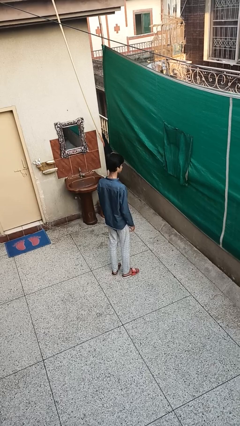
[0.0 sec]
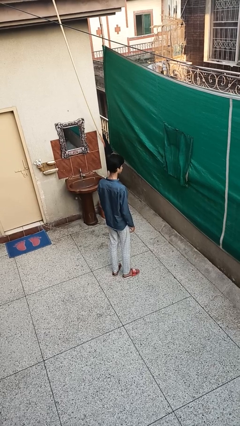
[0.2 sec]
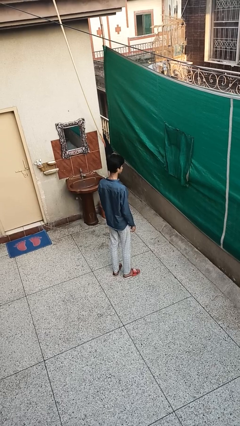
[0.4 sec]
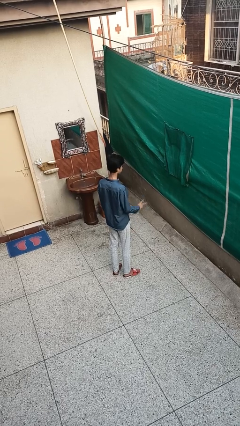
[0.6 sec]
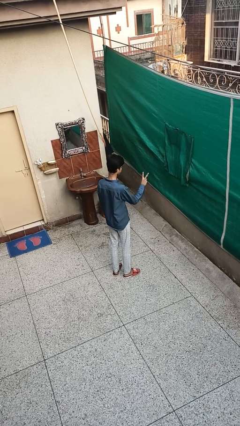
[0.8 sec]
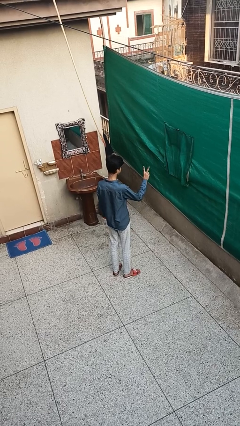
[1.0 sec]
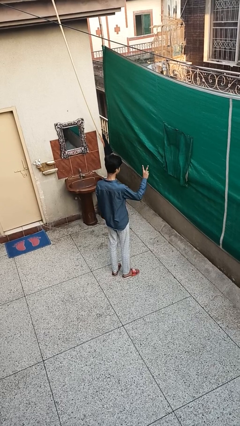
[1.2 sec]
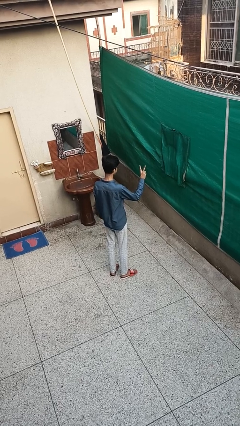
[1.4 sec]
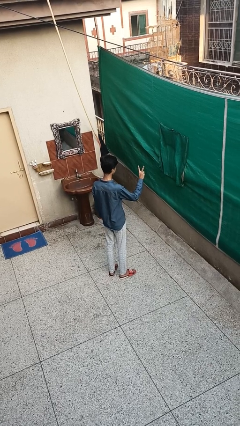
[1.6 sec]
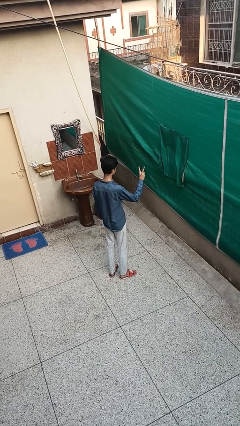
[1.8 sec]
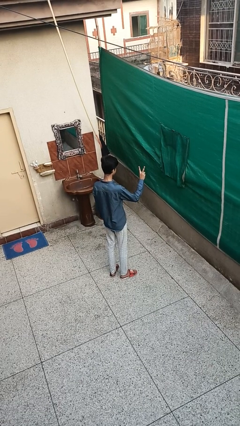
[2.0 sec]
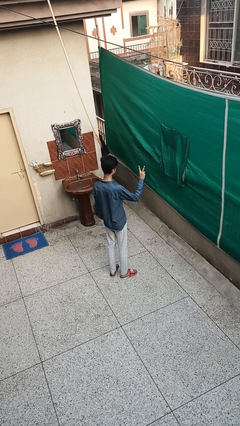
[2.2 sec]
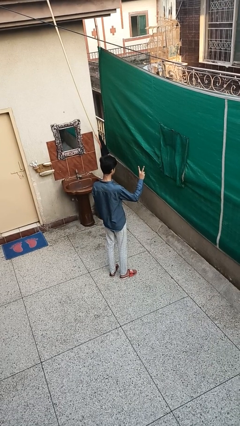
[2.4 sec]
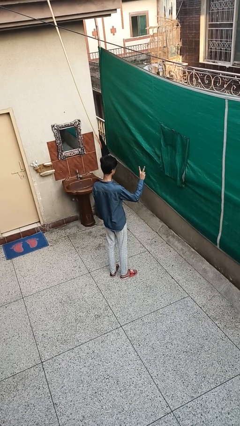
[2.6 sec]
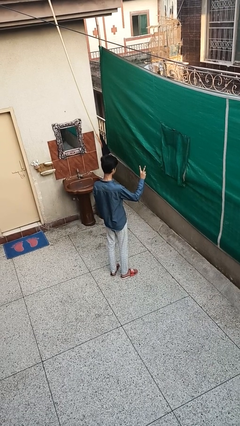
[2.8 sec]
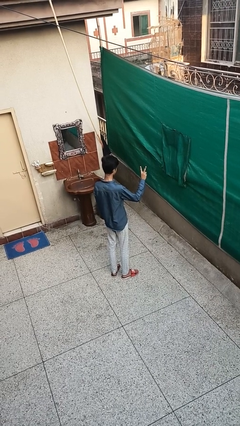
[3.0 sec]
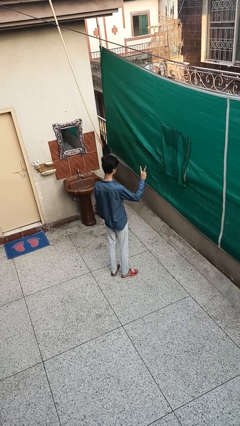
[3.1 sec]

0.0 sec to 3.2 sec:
person gestures peace

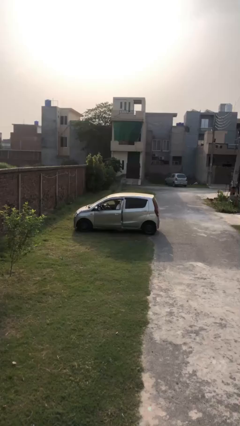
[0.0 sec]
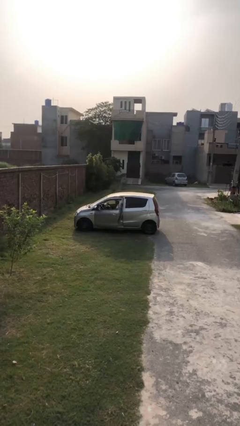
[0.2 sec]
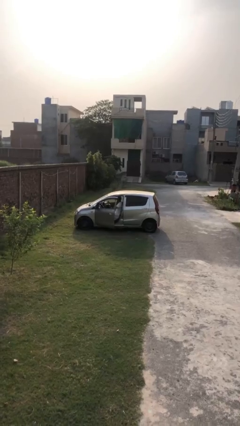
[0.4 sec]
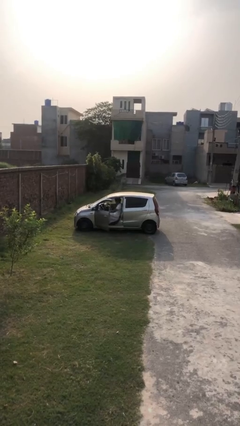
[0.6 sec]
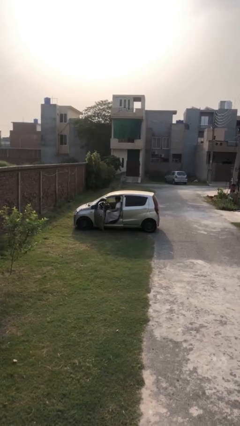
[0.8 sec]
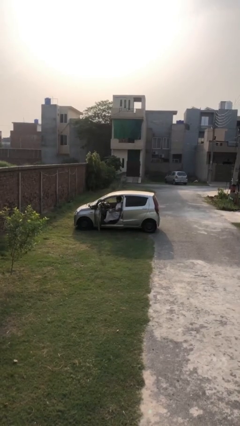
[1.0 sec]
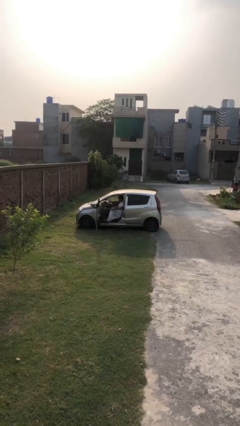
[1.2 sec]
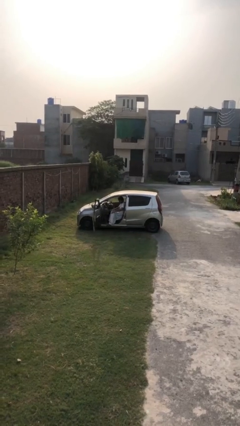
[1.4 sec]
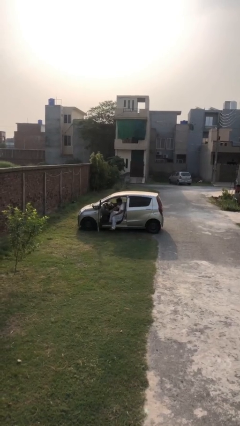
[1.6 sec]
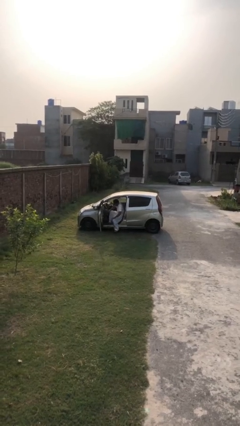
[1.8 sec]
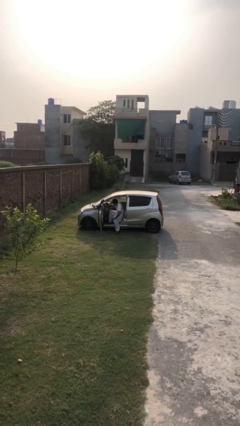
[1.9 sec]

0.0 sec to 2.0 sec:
person opens car door

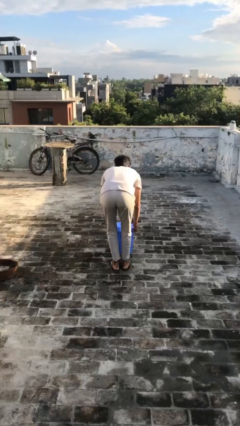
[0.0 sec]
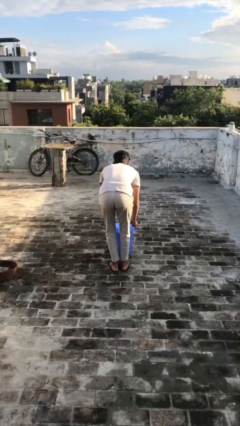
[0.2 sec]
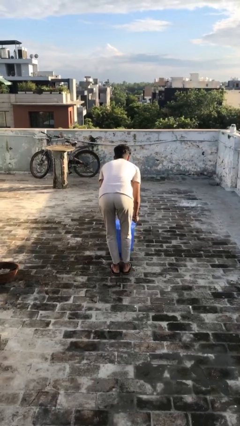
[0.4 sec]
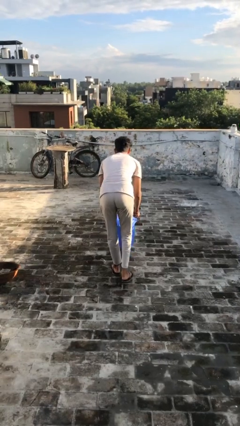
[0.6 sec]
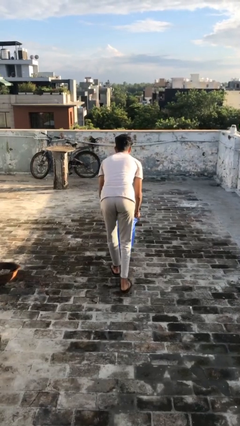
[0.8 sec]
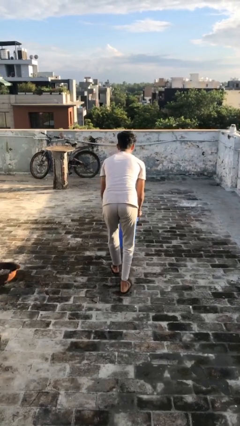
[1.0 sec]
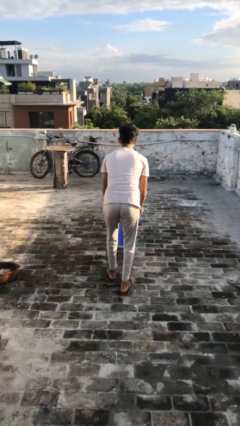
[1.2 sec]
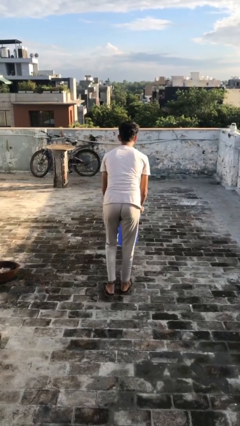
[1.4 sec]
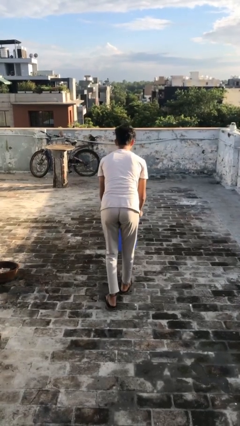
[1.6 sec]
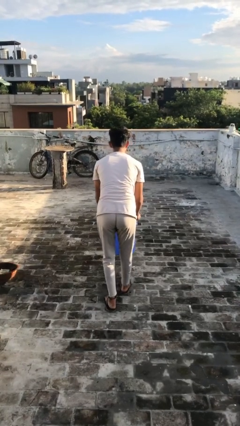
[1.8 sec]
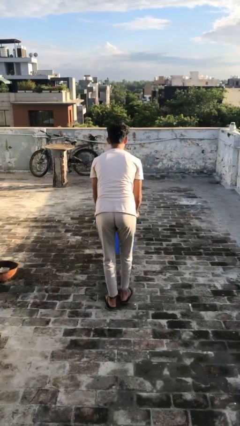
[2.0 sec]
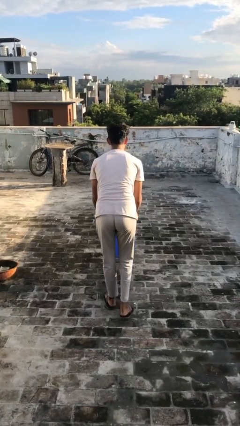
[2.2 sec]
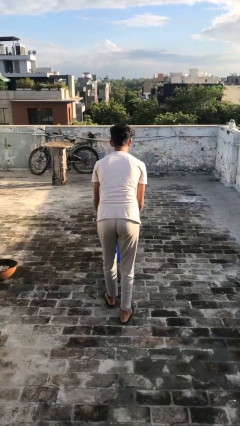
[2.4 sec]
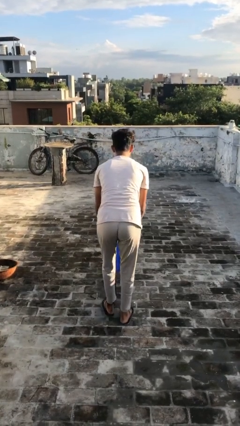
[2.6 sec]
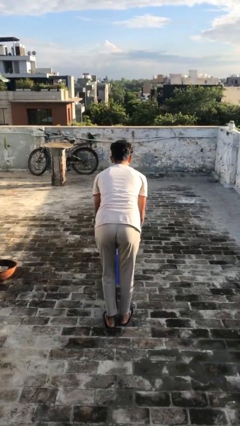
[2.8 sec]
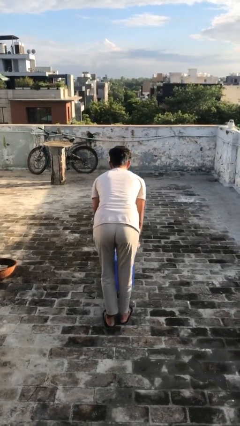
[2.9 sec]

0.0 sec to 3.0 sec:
person pulls wheeled trashcan

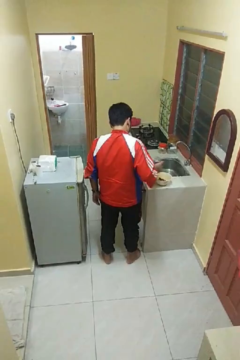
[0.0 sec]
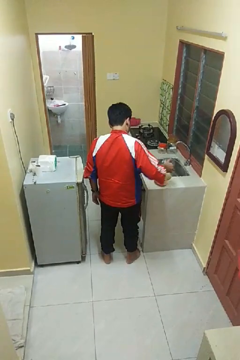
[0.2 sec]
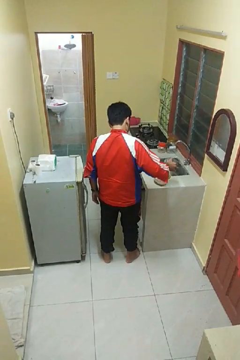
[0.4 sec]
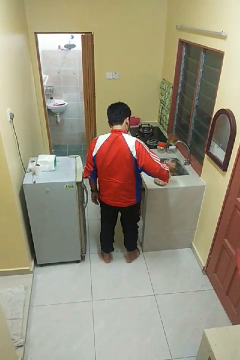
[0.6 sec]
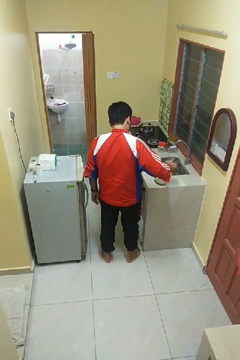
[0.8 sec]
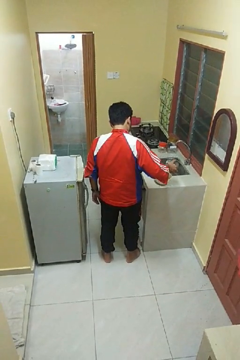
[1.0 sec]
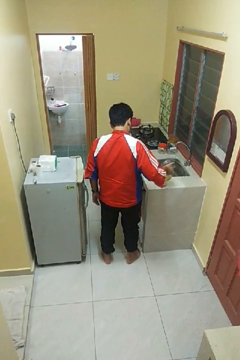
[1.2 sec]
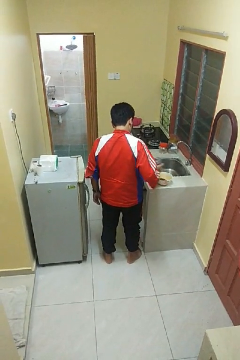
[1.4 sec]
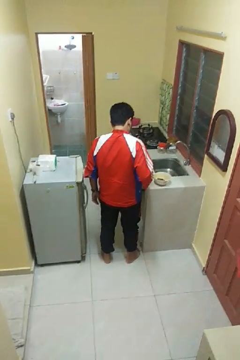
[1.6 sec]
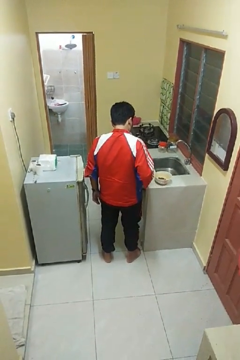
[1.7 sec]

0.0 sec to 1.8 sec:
person pours into bowl

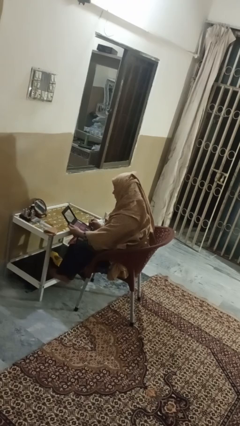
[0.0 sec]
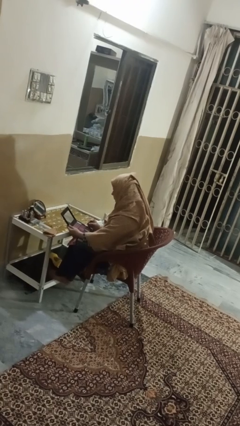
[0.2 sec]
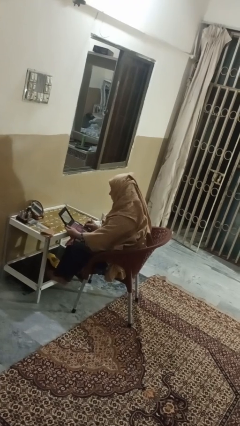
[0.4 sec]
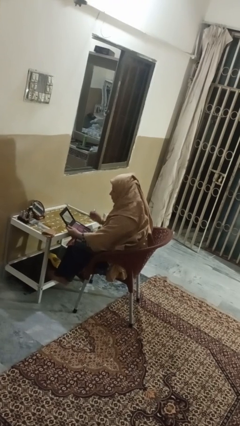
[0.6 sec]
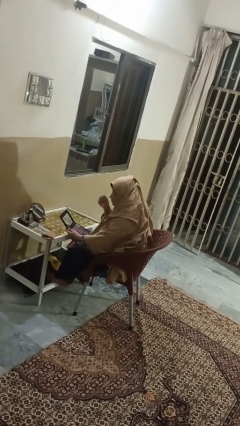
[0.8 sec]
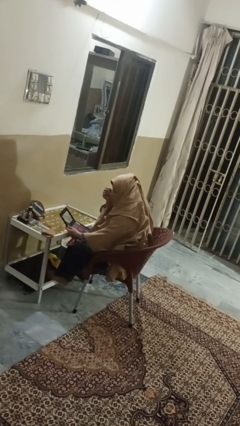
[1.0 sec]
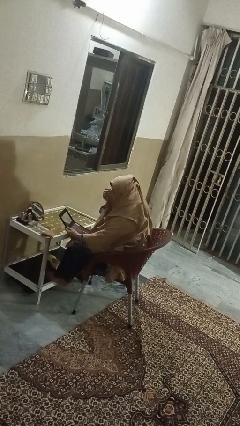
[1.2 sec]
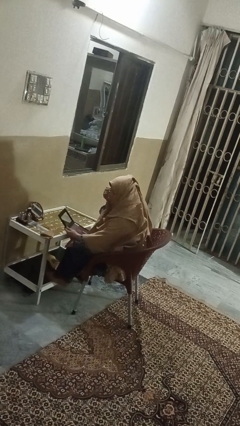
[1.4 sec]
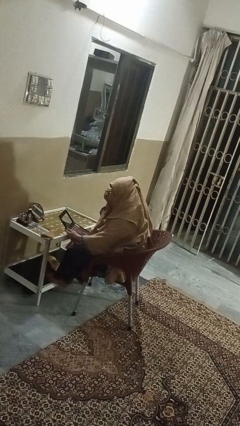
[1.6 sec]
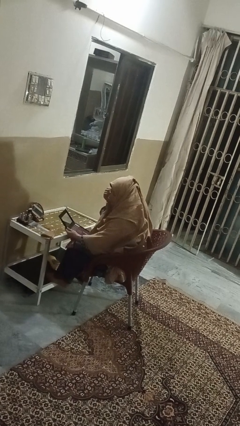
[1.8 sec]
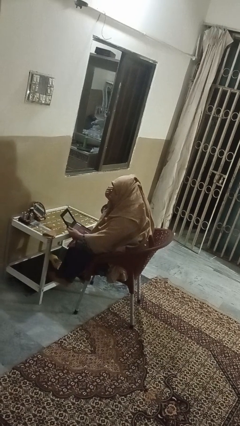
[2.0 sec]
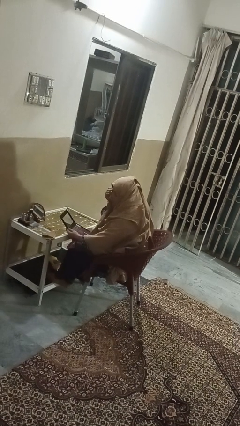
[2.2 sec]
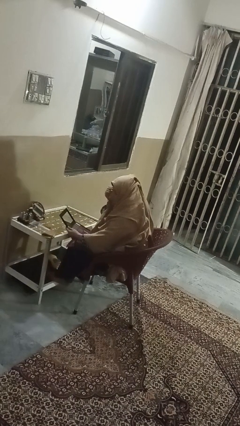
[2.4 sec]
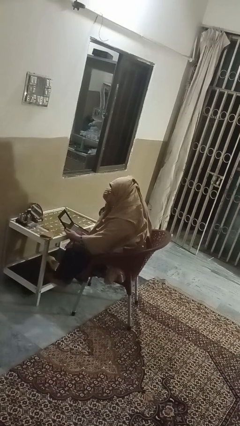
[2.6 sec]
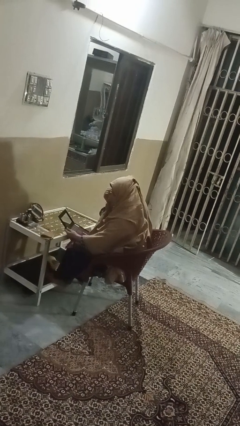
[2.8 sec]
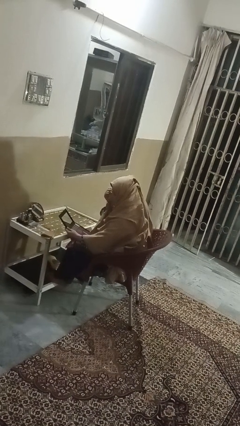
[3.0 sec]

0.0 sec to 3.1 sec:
person applies eye makeup

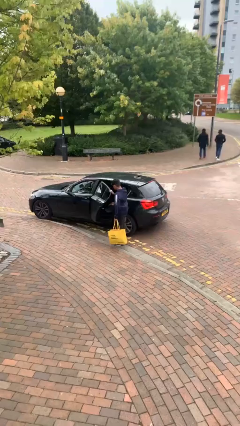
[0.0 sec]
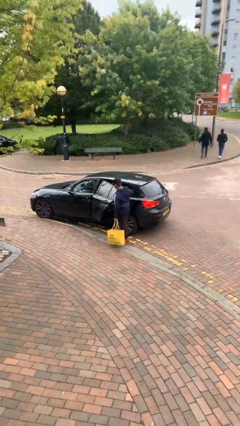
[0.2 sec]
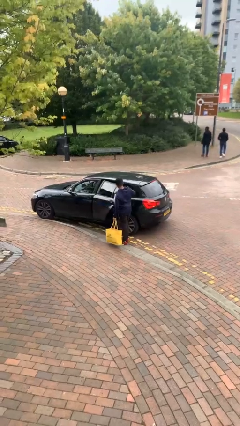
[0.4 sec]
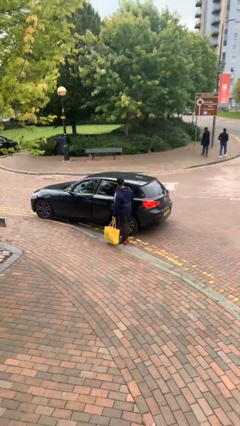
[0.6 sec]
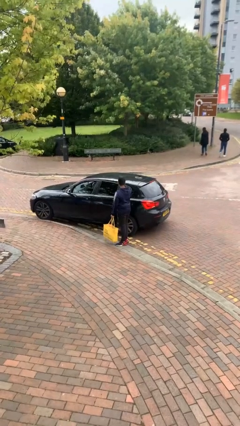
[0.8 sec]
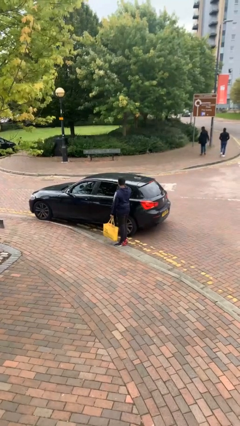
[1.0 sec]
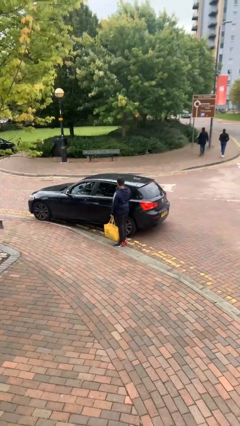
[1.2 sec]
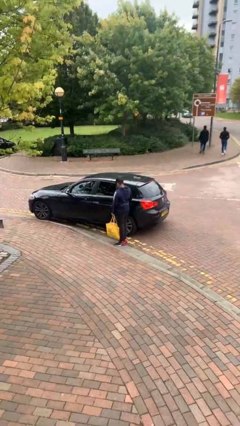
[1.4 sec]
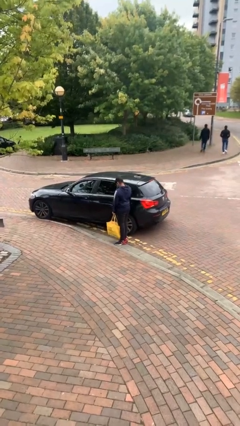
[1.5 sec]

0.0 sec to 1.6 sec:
person closes car door

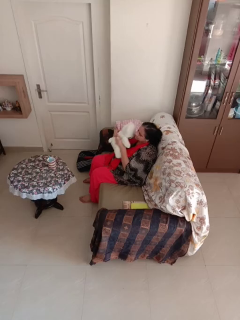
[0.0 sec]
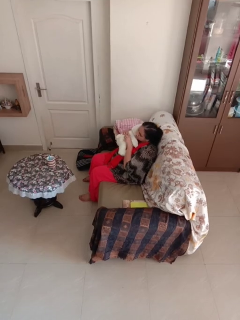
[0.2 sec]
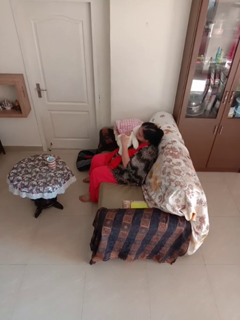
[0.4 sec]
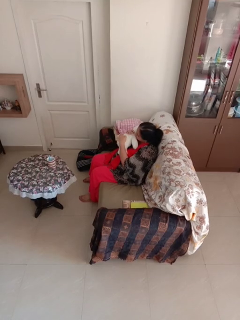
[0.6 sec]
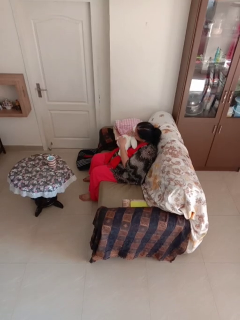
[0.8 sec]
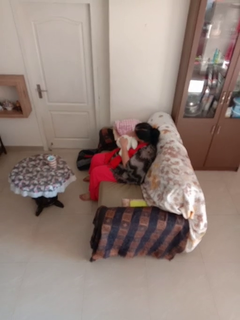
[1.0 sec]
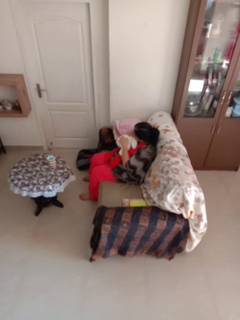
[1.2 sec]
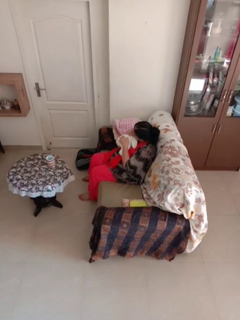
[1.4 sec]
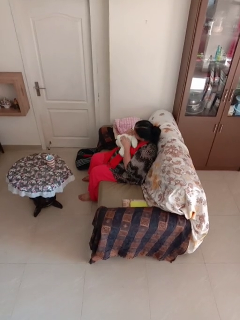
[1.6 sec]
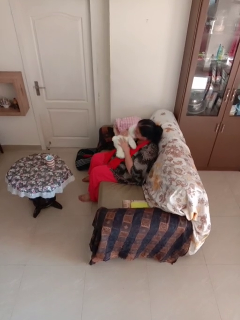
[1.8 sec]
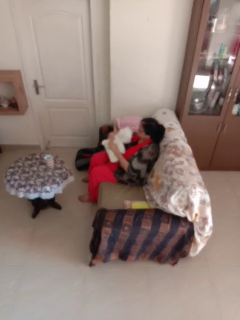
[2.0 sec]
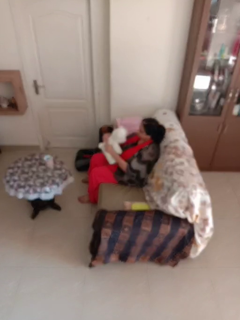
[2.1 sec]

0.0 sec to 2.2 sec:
person hugs stuffed animal

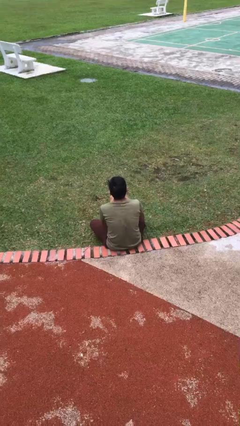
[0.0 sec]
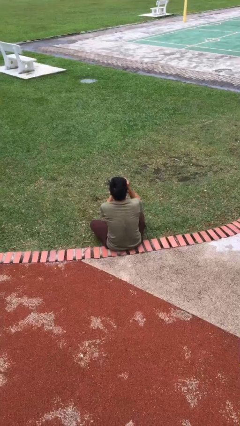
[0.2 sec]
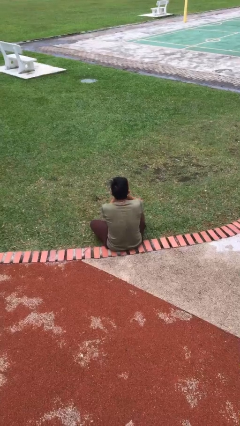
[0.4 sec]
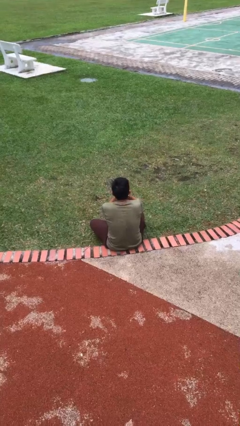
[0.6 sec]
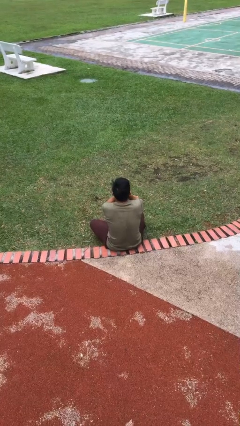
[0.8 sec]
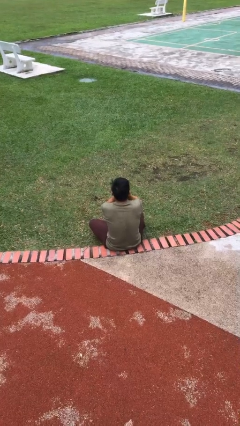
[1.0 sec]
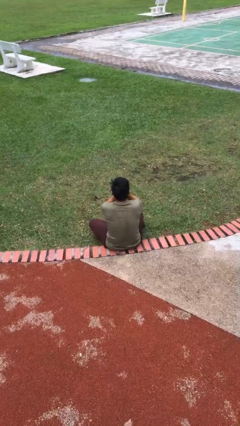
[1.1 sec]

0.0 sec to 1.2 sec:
person sneezes into hand

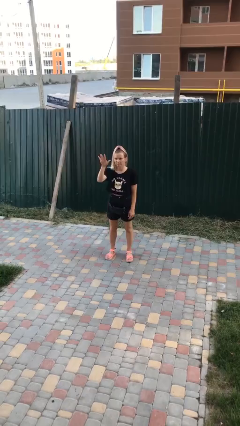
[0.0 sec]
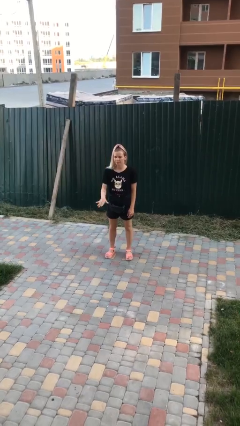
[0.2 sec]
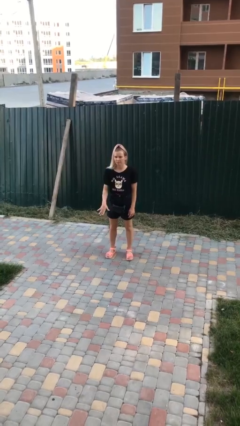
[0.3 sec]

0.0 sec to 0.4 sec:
person gestures swipe down
